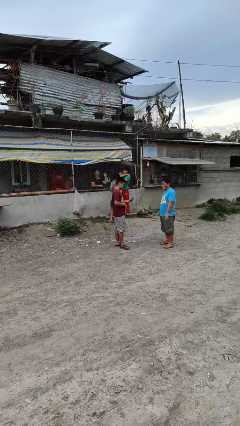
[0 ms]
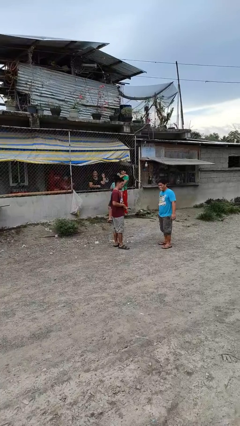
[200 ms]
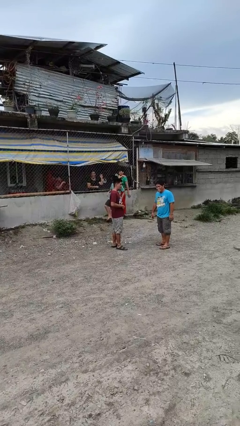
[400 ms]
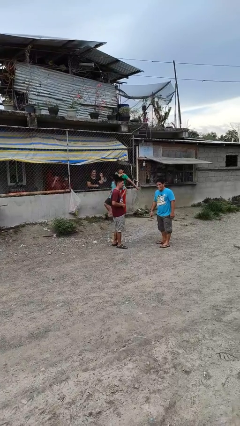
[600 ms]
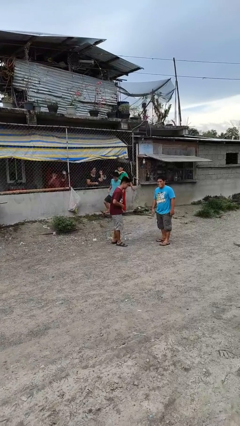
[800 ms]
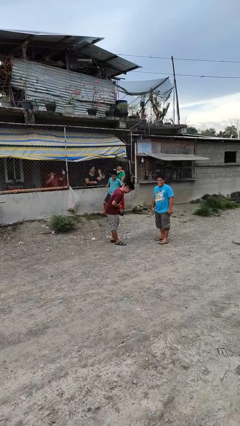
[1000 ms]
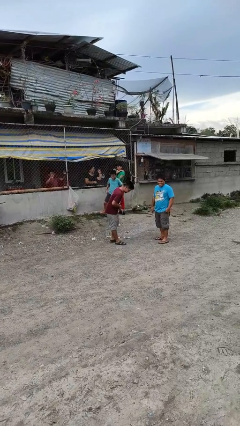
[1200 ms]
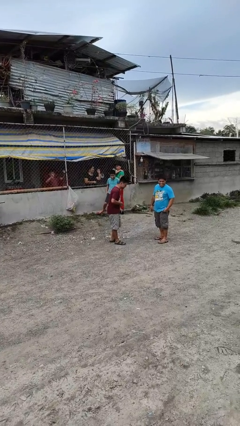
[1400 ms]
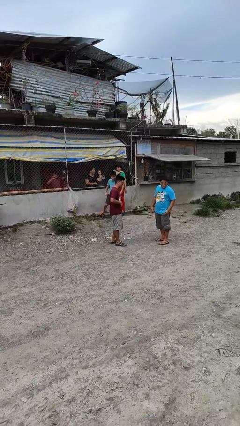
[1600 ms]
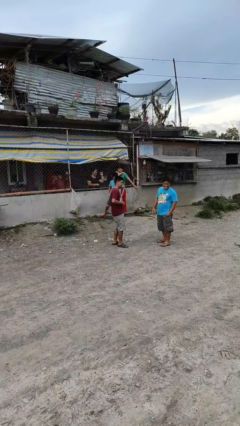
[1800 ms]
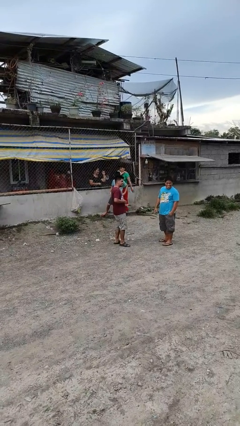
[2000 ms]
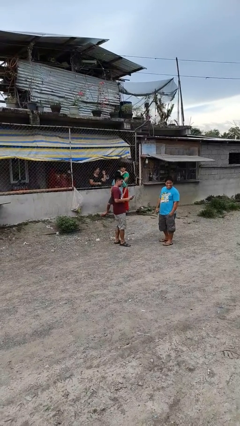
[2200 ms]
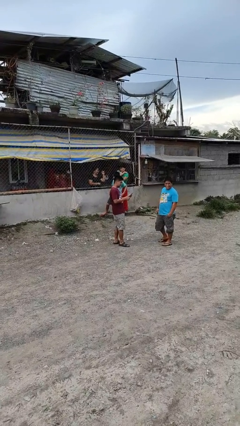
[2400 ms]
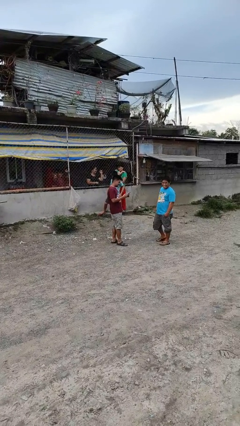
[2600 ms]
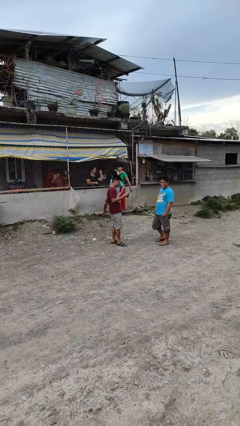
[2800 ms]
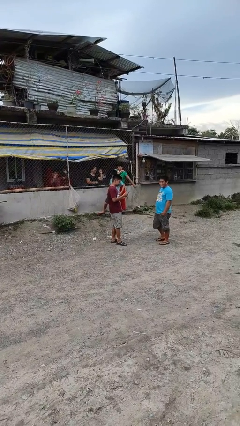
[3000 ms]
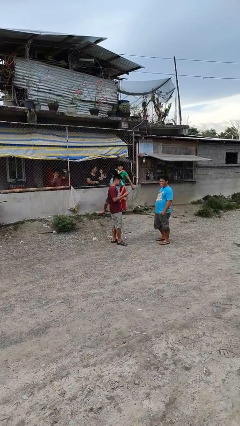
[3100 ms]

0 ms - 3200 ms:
person laughs with person

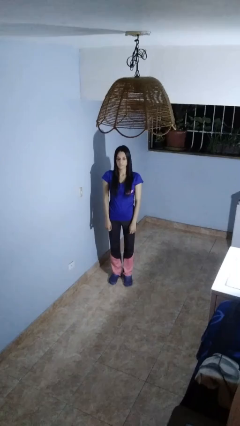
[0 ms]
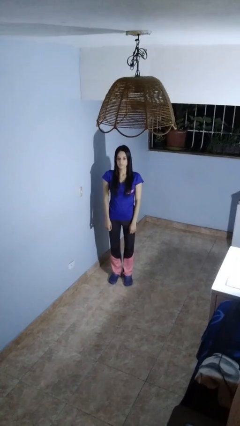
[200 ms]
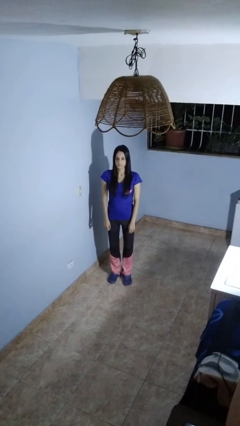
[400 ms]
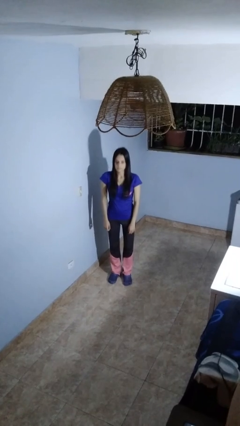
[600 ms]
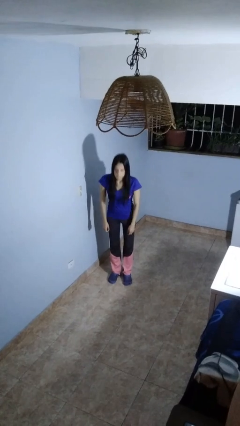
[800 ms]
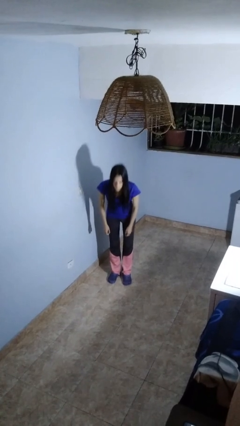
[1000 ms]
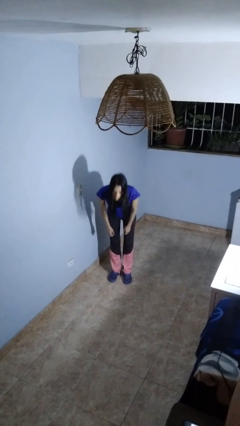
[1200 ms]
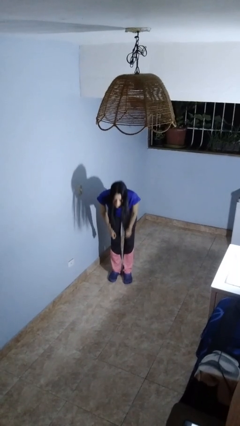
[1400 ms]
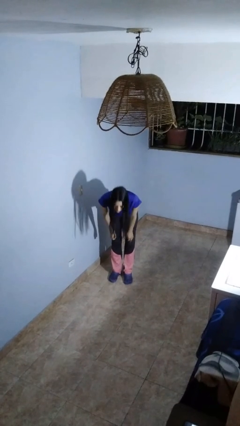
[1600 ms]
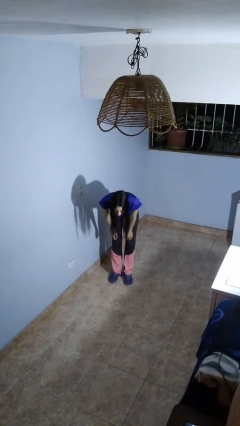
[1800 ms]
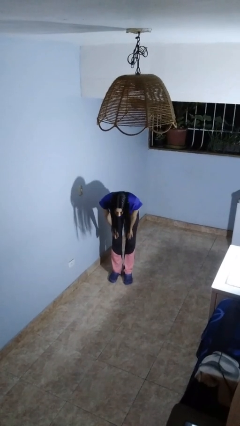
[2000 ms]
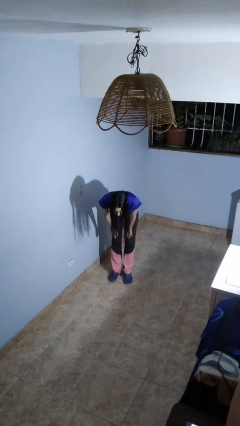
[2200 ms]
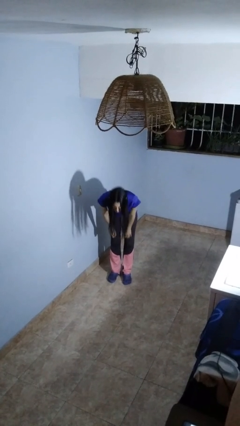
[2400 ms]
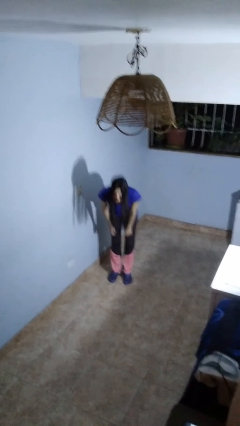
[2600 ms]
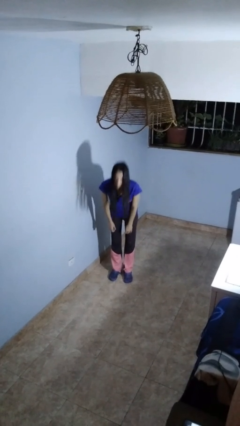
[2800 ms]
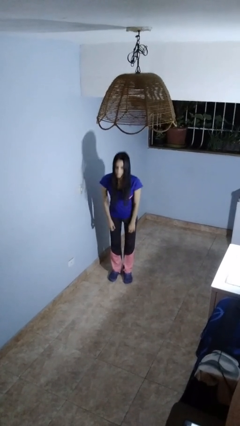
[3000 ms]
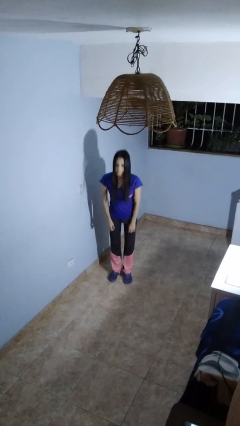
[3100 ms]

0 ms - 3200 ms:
person bows

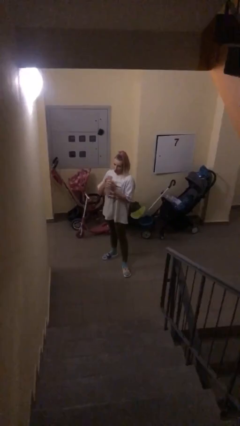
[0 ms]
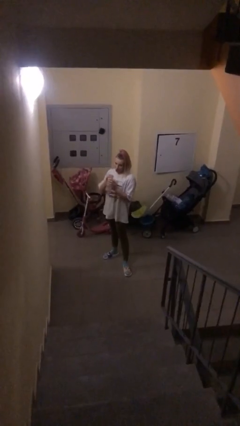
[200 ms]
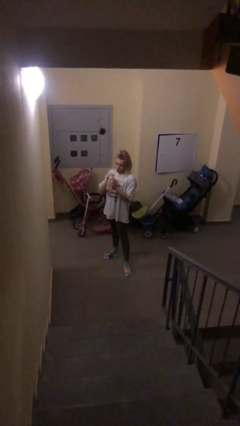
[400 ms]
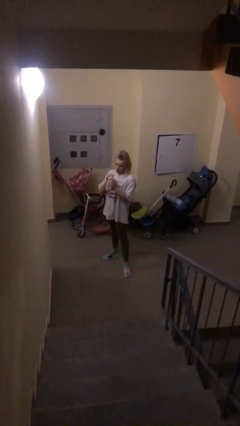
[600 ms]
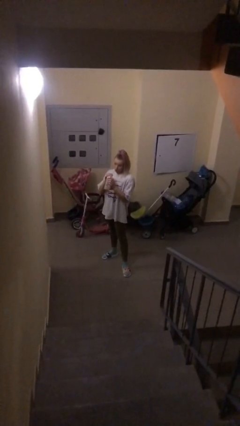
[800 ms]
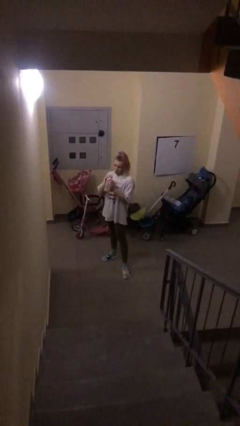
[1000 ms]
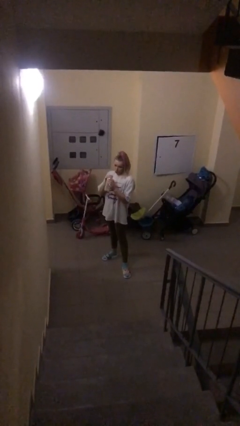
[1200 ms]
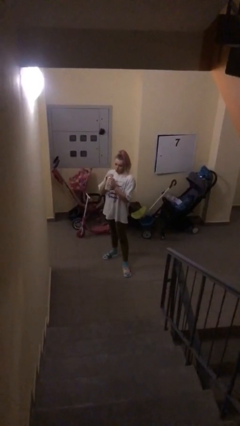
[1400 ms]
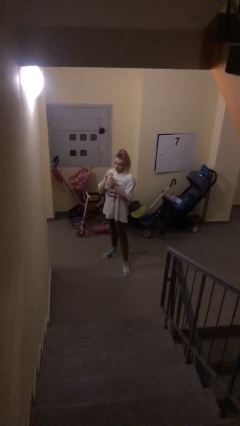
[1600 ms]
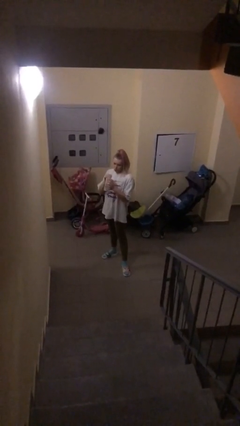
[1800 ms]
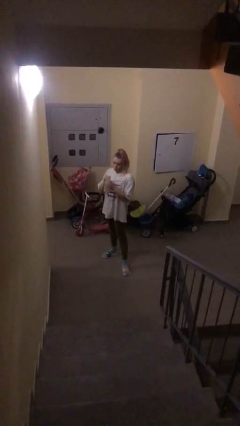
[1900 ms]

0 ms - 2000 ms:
person drinks from straw

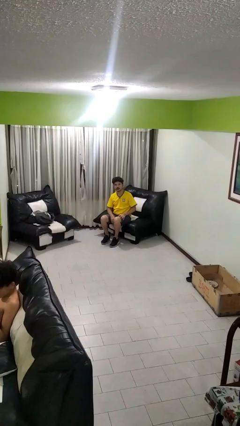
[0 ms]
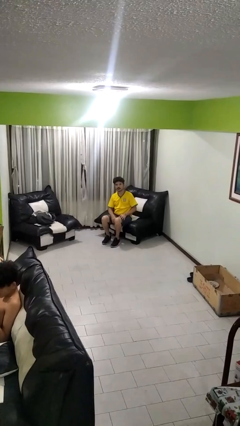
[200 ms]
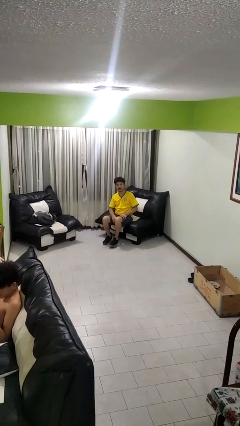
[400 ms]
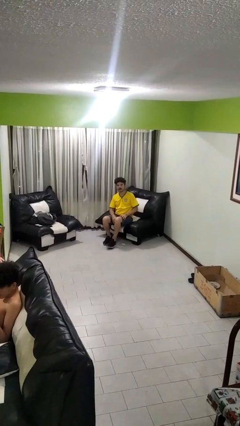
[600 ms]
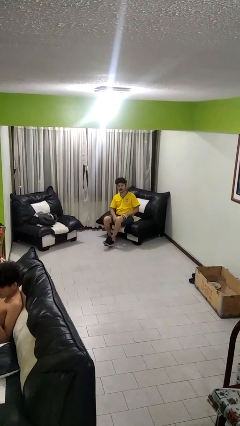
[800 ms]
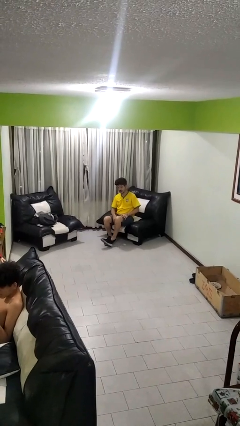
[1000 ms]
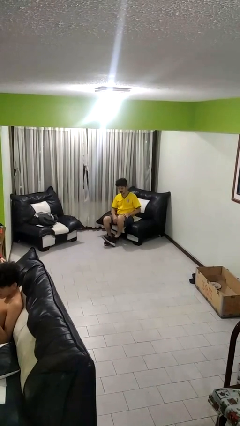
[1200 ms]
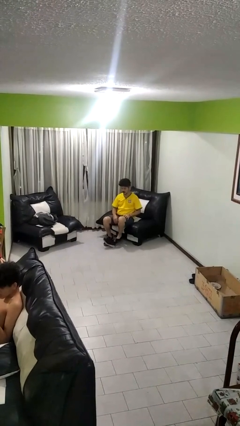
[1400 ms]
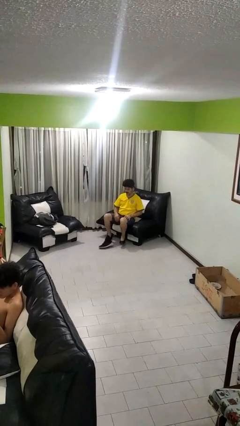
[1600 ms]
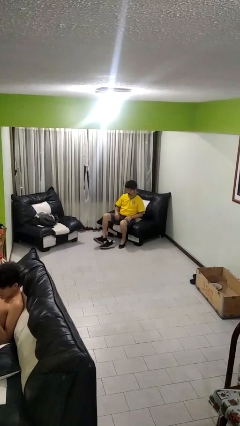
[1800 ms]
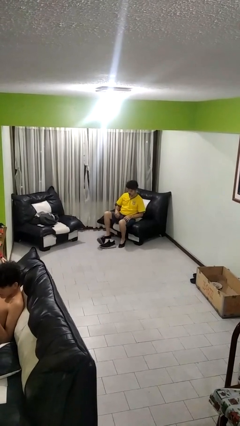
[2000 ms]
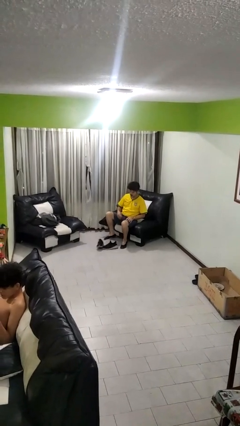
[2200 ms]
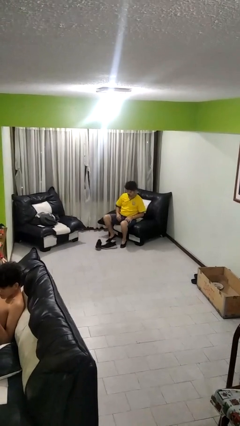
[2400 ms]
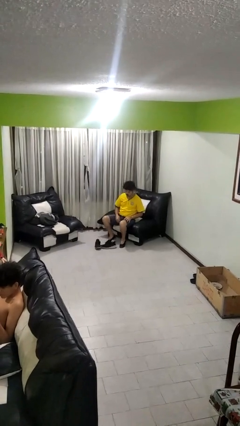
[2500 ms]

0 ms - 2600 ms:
person takes off shoes

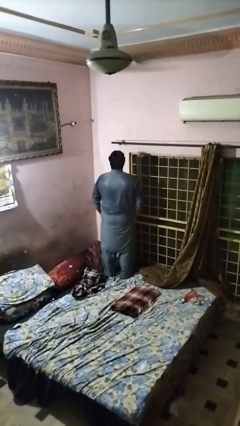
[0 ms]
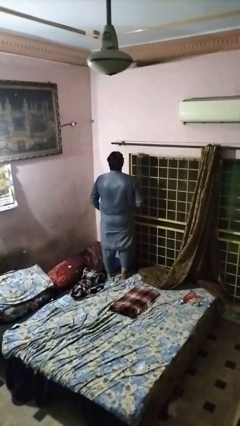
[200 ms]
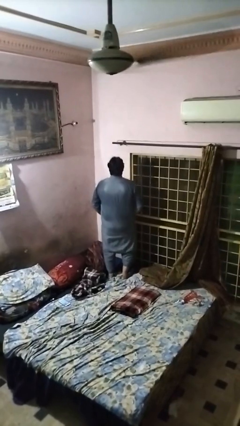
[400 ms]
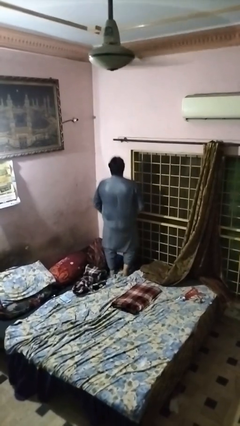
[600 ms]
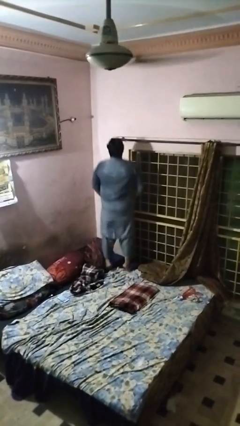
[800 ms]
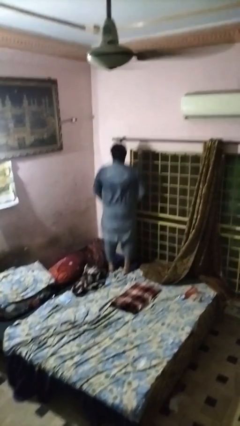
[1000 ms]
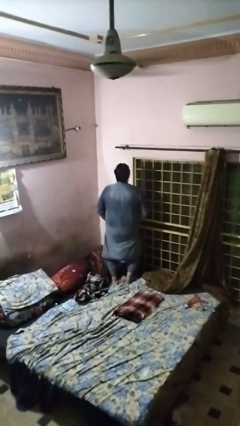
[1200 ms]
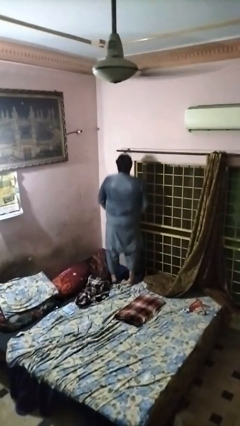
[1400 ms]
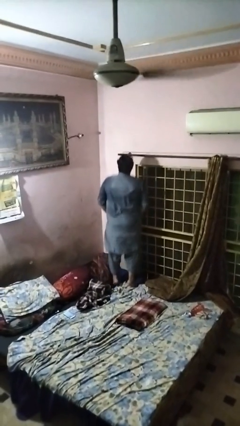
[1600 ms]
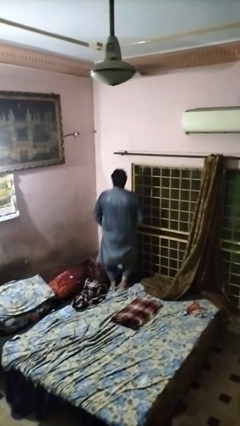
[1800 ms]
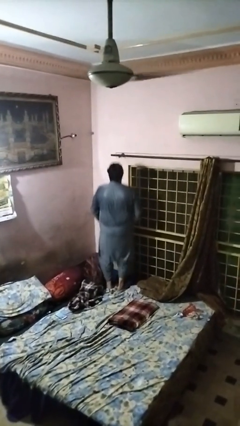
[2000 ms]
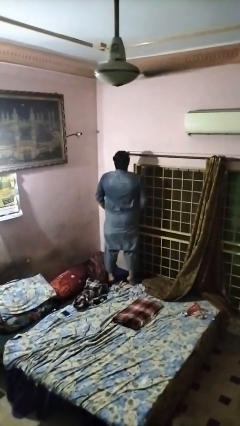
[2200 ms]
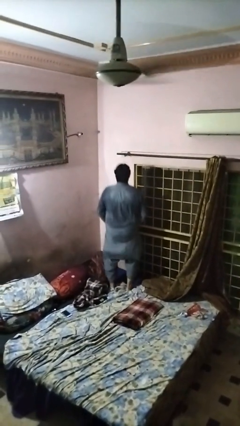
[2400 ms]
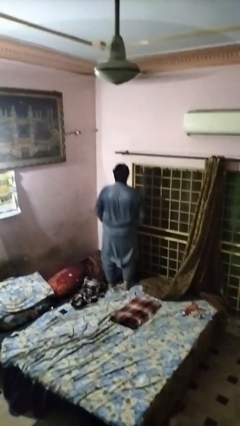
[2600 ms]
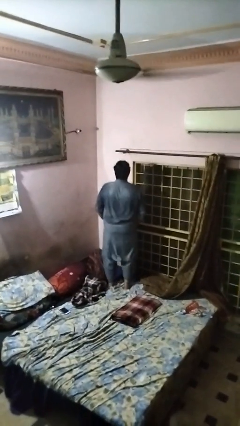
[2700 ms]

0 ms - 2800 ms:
person jumps on bed

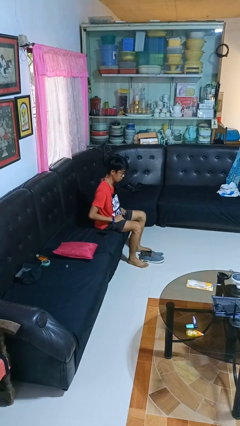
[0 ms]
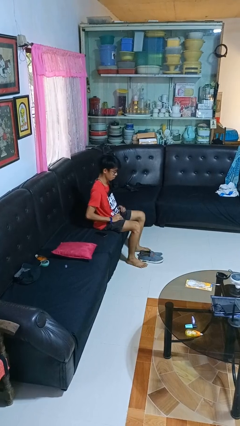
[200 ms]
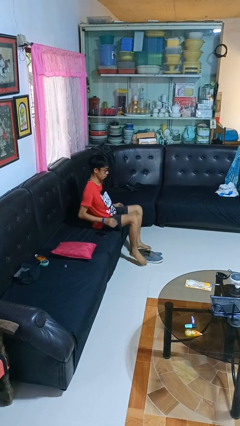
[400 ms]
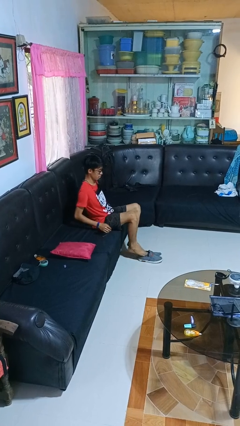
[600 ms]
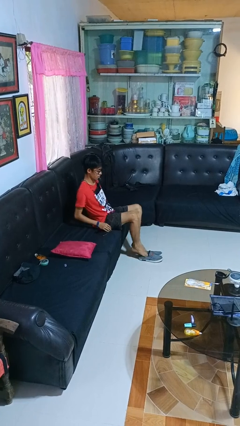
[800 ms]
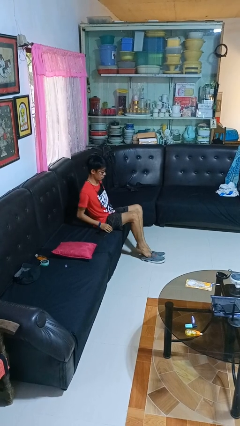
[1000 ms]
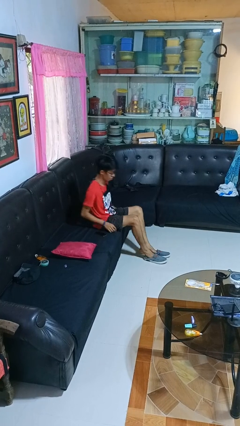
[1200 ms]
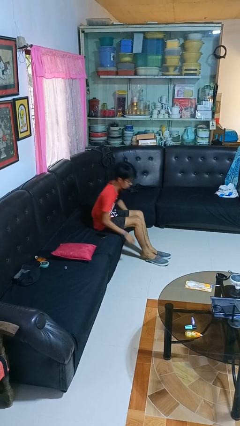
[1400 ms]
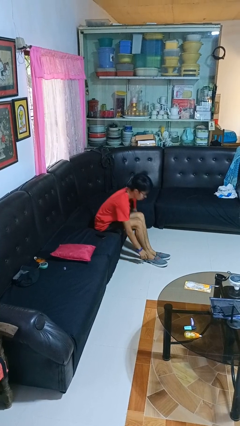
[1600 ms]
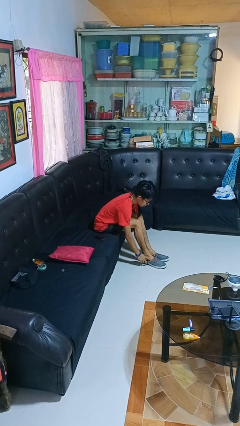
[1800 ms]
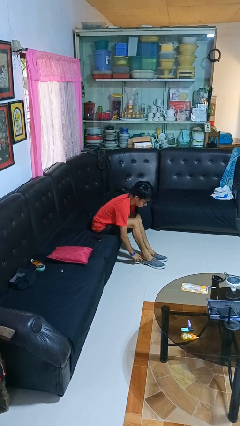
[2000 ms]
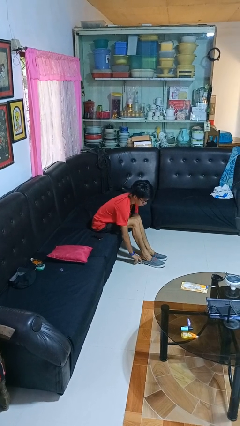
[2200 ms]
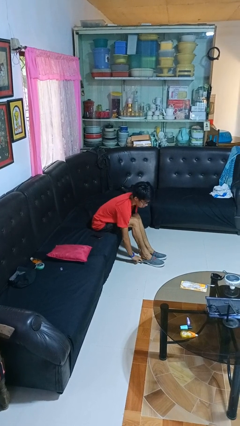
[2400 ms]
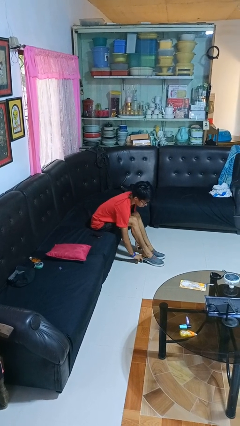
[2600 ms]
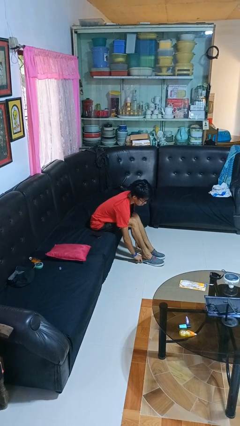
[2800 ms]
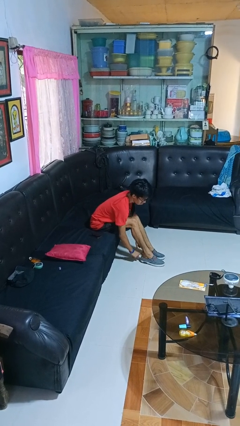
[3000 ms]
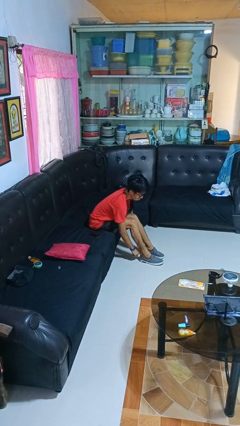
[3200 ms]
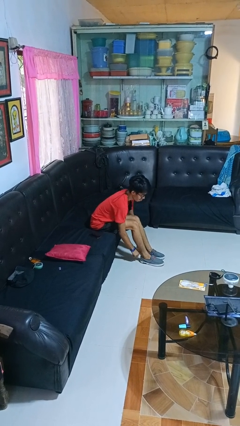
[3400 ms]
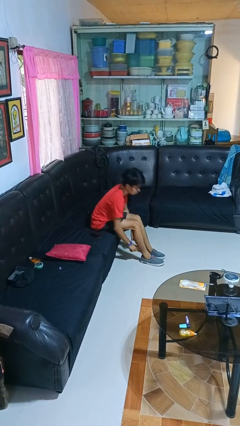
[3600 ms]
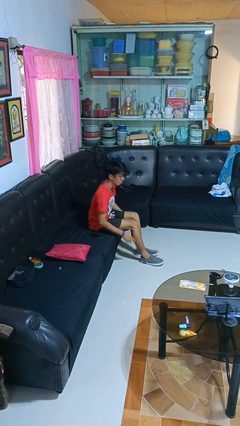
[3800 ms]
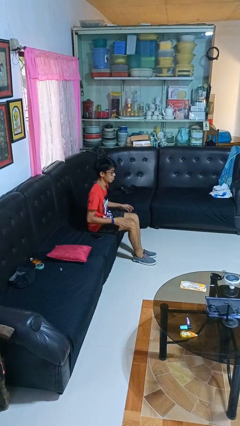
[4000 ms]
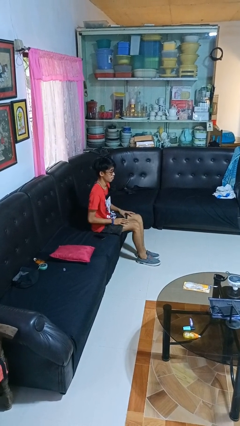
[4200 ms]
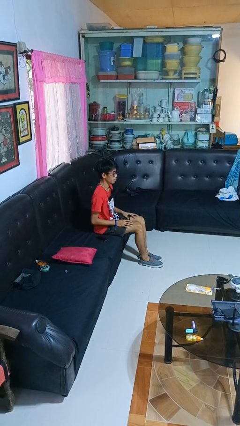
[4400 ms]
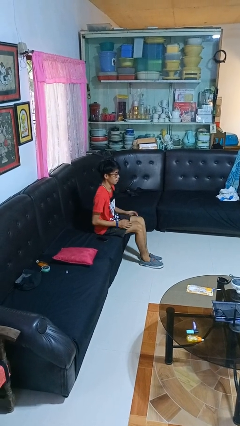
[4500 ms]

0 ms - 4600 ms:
person puts on shoes
